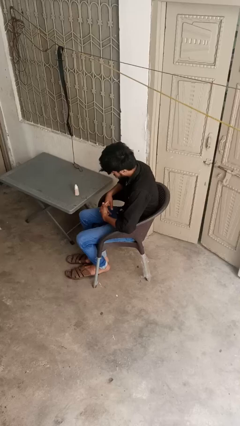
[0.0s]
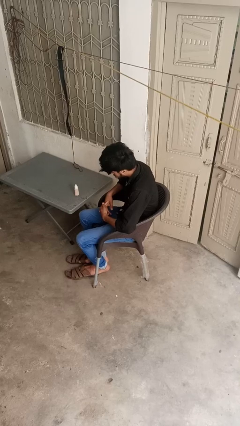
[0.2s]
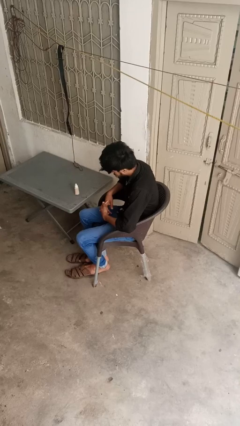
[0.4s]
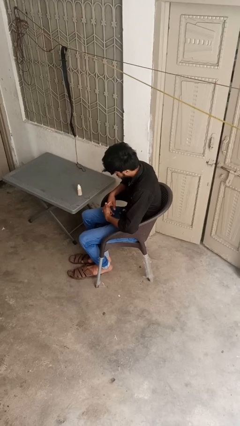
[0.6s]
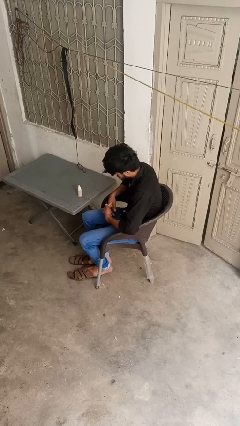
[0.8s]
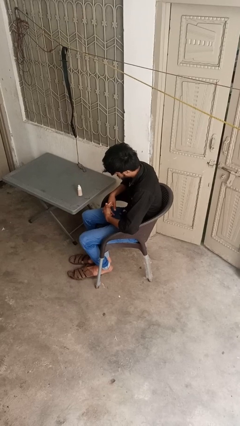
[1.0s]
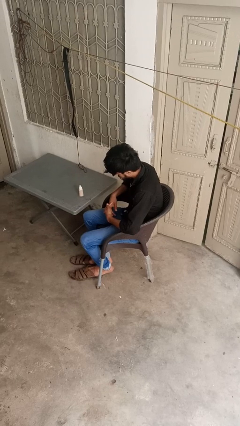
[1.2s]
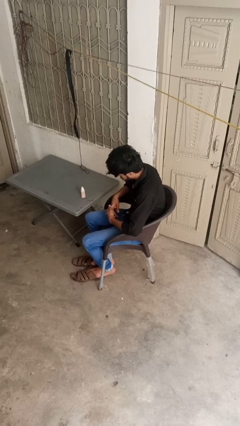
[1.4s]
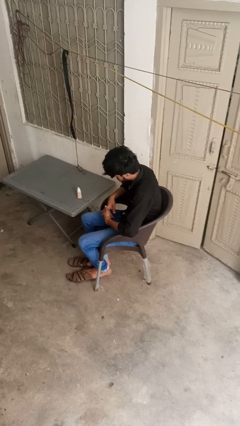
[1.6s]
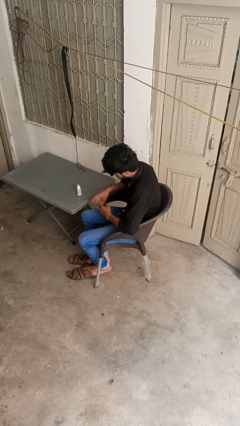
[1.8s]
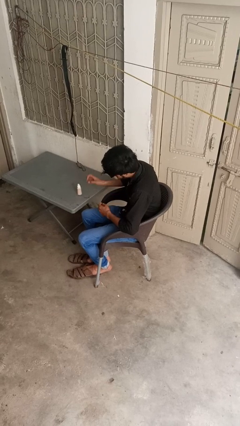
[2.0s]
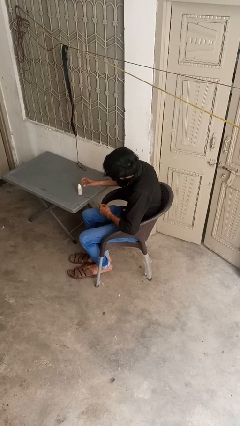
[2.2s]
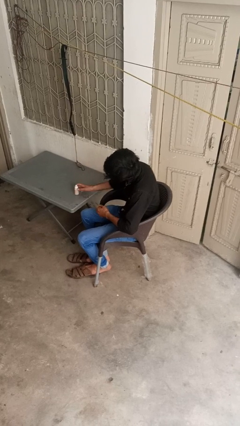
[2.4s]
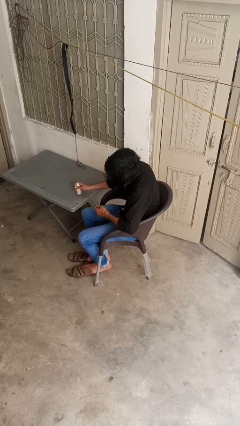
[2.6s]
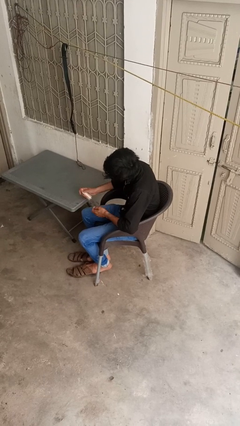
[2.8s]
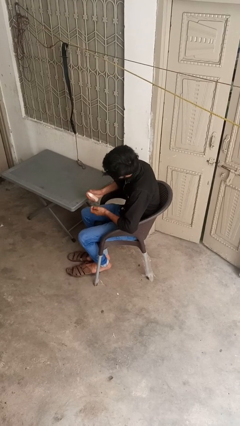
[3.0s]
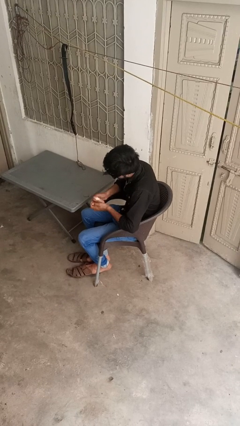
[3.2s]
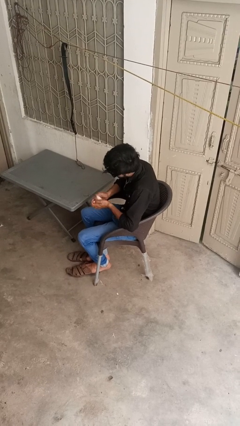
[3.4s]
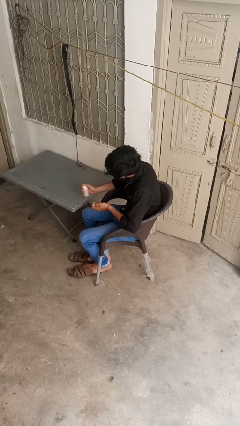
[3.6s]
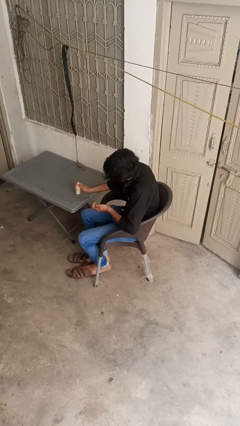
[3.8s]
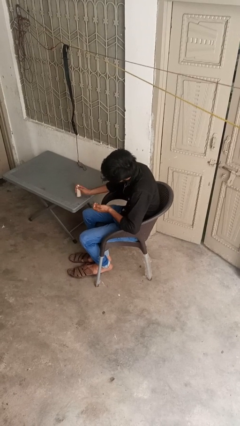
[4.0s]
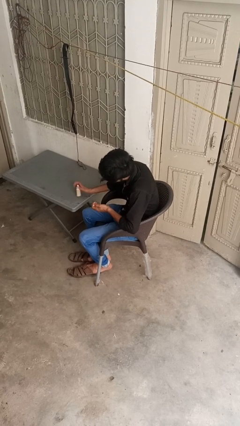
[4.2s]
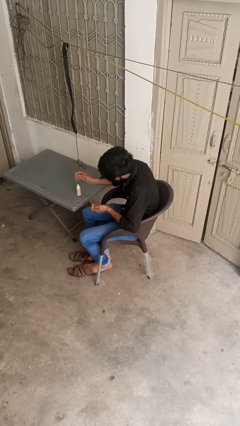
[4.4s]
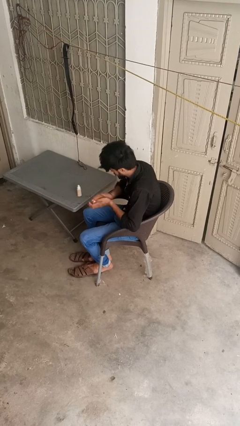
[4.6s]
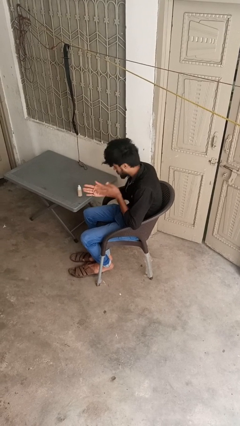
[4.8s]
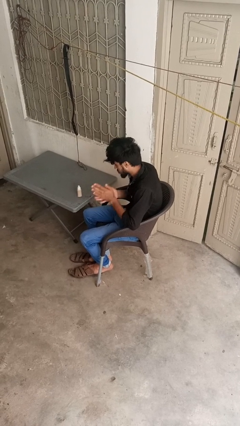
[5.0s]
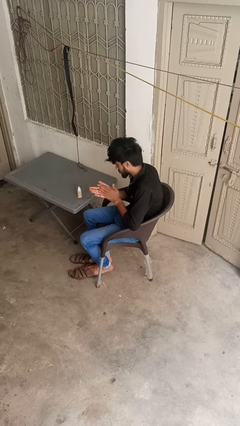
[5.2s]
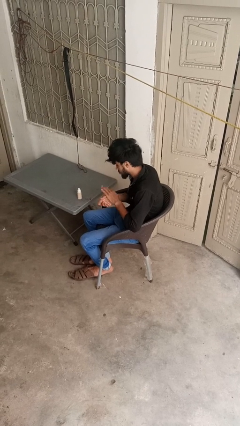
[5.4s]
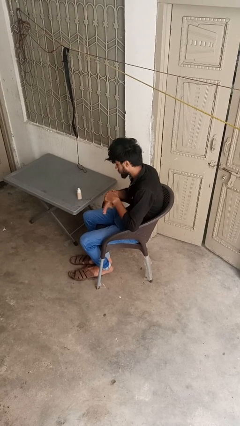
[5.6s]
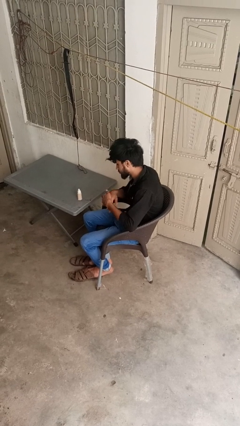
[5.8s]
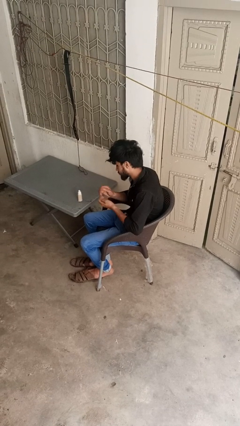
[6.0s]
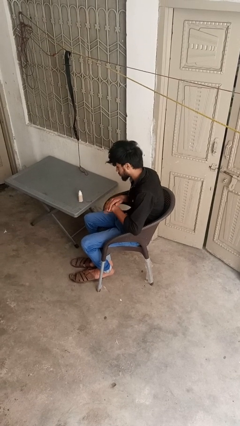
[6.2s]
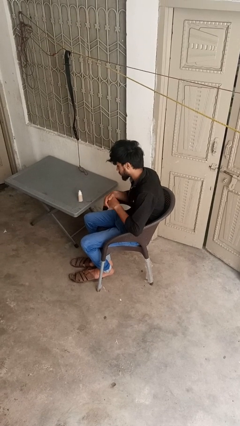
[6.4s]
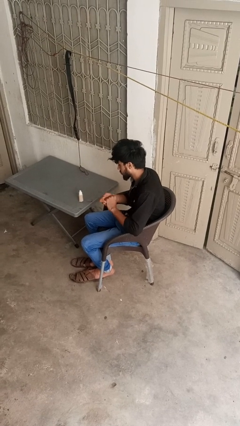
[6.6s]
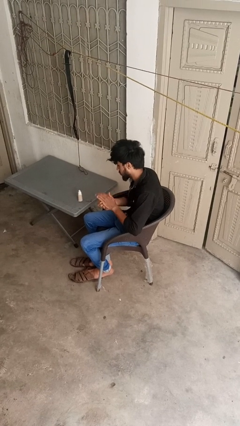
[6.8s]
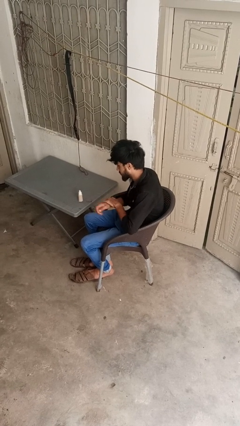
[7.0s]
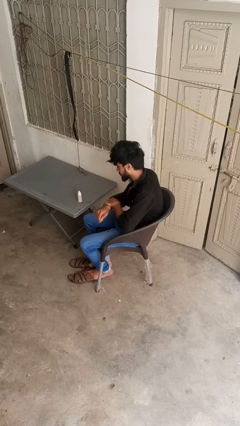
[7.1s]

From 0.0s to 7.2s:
person applies facial moisturizer

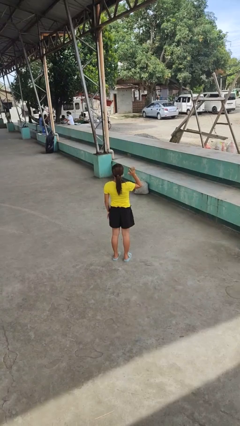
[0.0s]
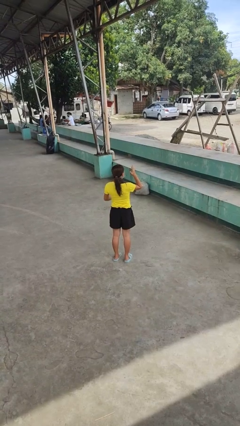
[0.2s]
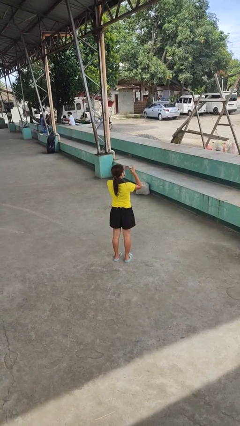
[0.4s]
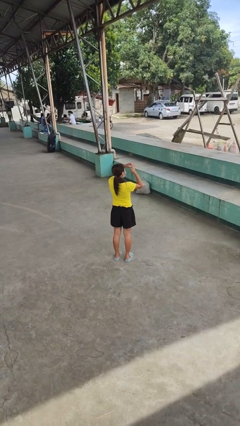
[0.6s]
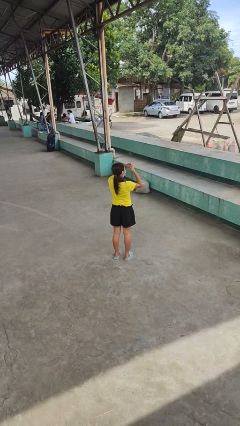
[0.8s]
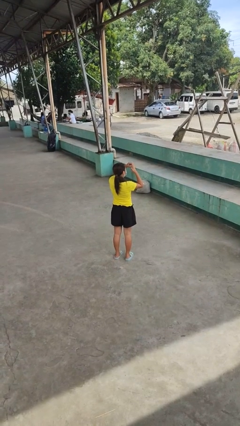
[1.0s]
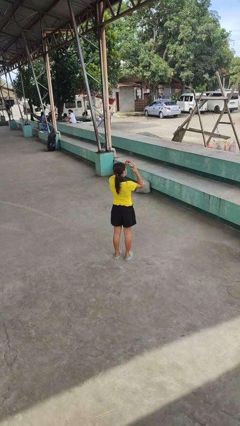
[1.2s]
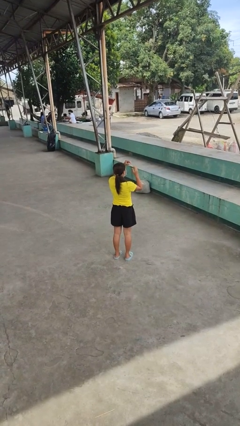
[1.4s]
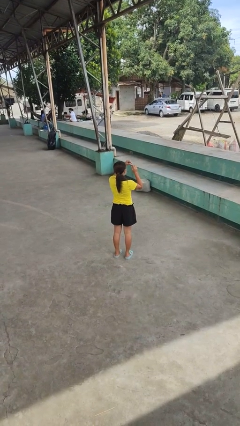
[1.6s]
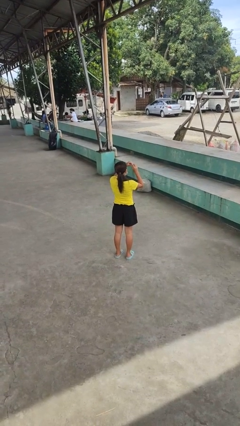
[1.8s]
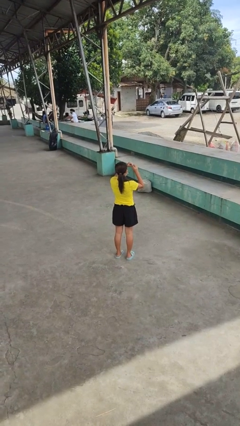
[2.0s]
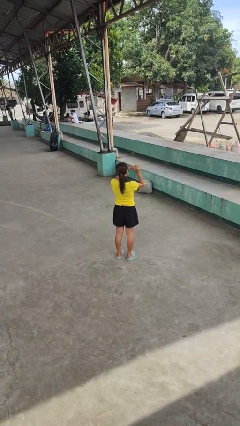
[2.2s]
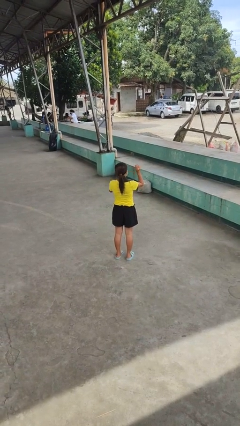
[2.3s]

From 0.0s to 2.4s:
person takes off ring

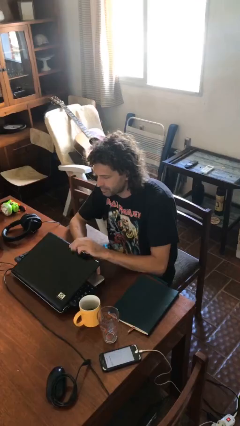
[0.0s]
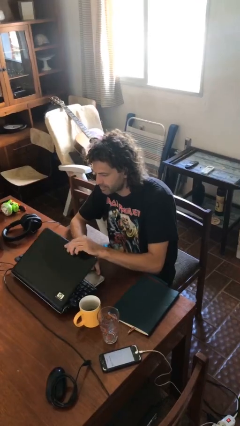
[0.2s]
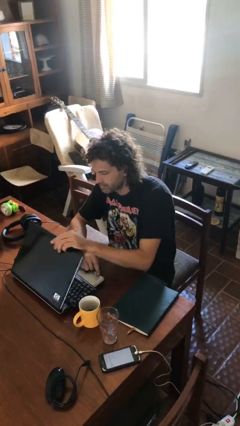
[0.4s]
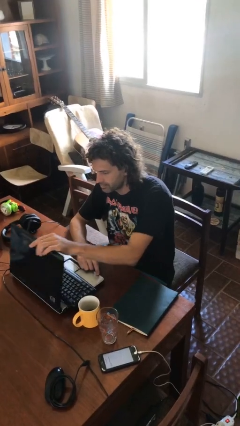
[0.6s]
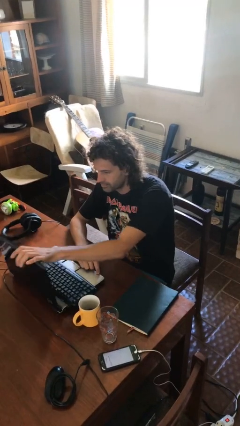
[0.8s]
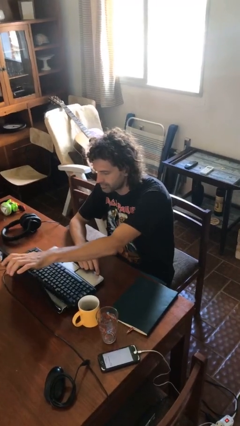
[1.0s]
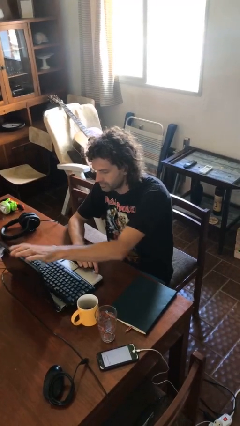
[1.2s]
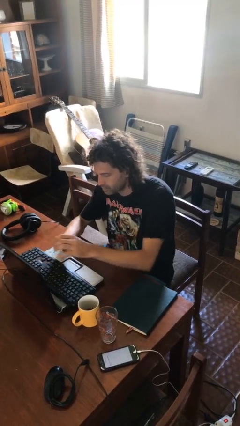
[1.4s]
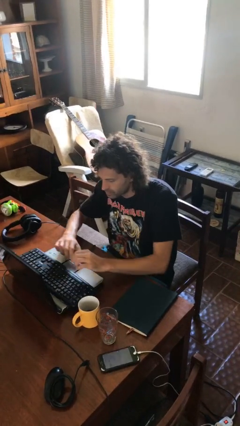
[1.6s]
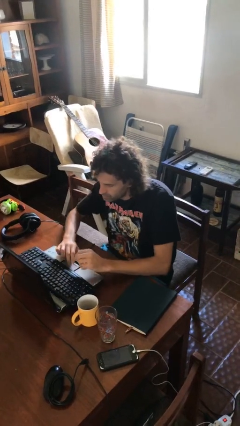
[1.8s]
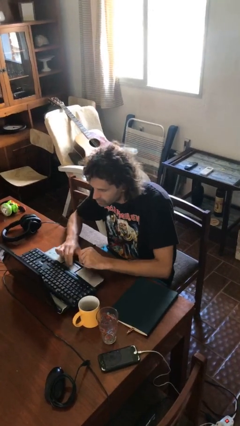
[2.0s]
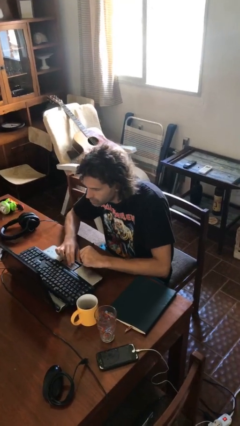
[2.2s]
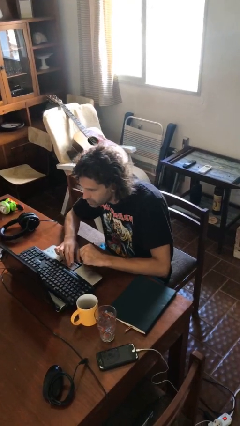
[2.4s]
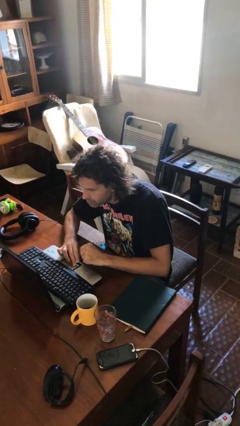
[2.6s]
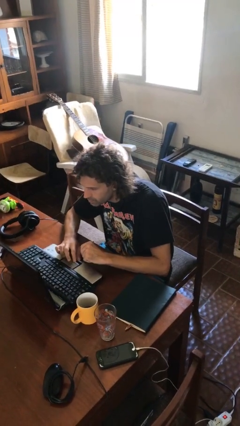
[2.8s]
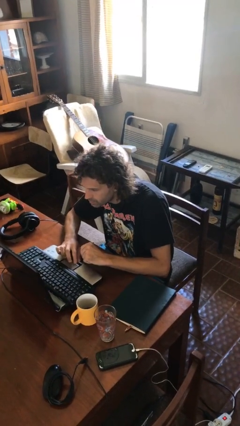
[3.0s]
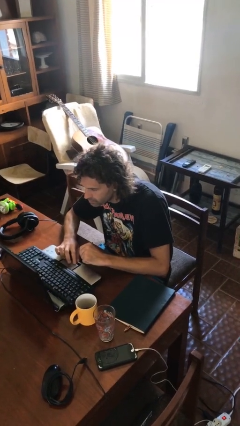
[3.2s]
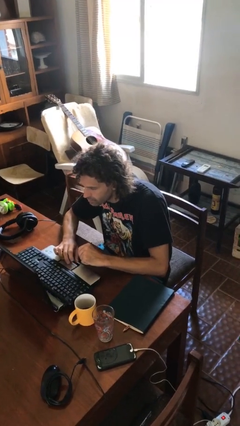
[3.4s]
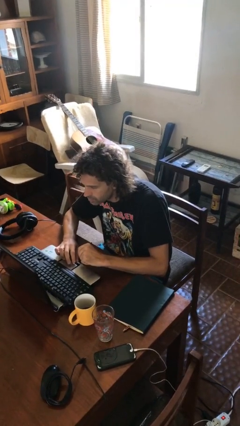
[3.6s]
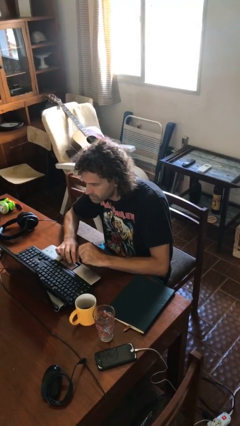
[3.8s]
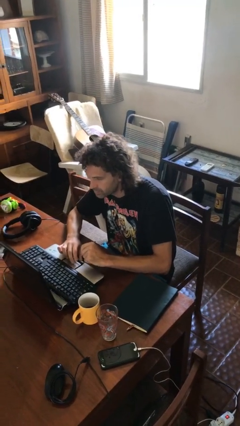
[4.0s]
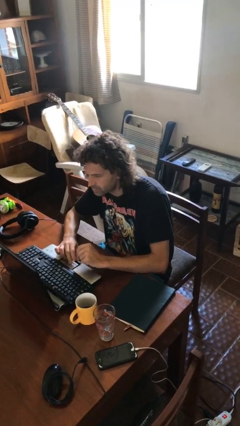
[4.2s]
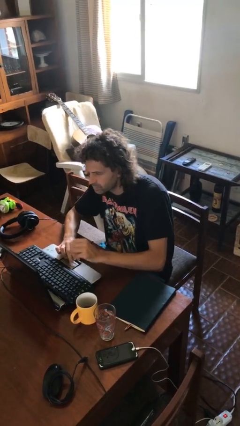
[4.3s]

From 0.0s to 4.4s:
person interacts with laptop

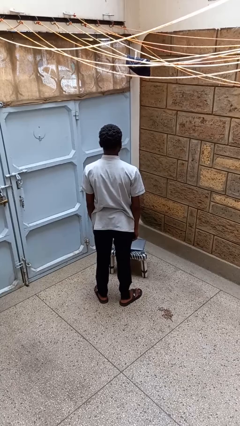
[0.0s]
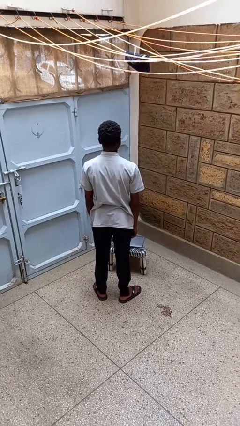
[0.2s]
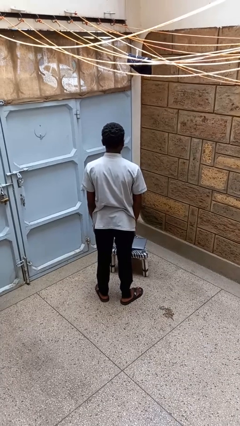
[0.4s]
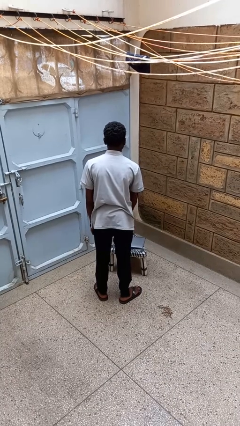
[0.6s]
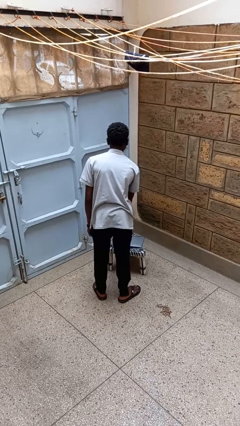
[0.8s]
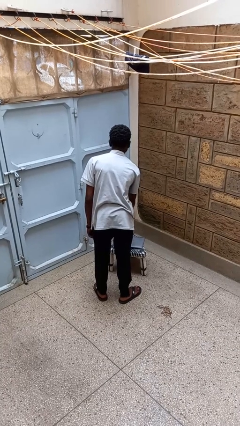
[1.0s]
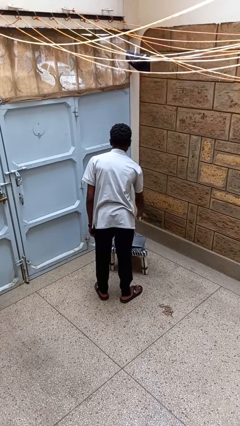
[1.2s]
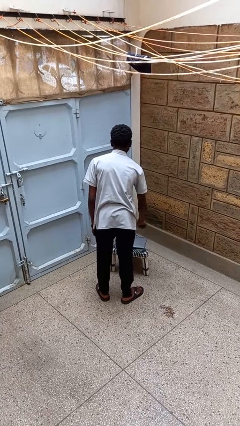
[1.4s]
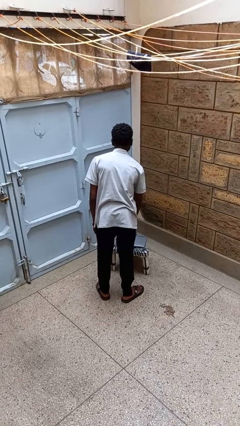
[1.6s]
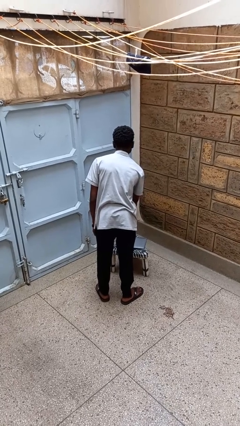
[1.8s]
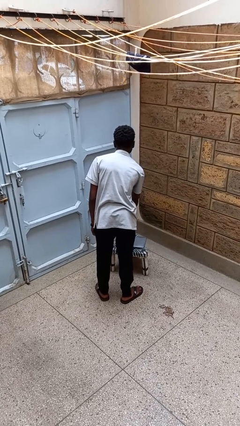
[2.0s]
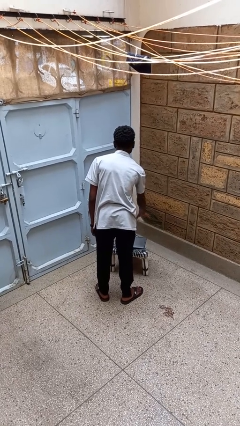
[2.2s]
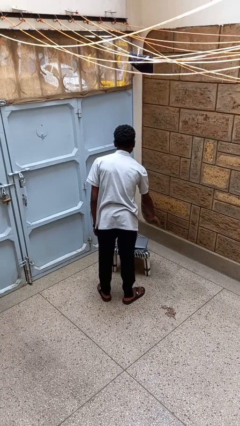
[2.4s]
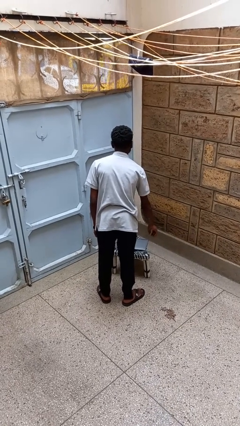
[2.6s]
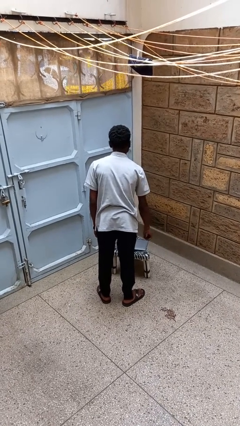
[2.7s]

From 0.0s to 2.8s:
person waves hand over object

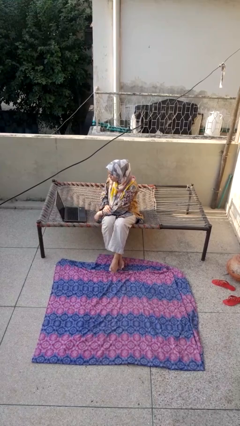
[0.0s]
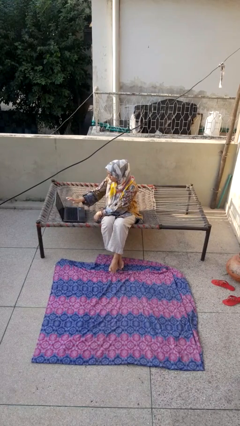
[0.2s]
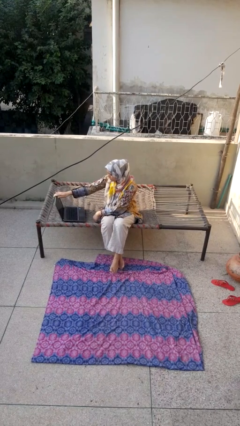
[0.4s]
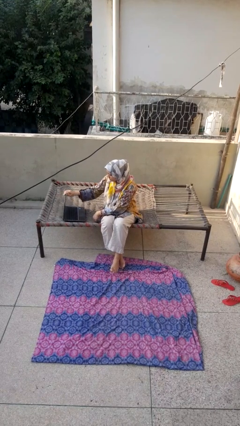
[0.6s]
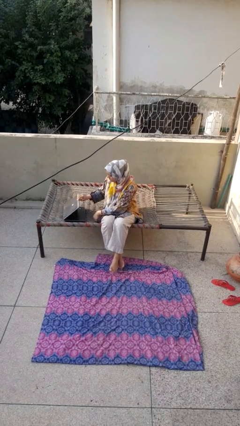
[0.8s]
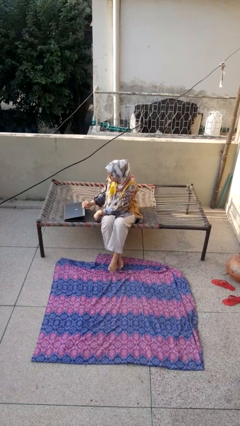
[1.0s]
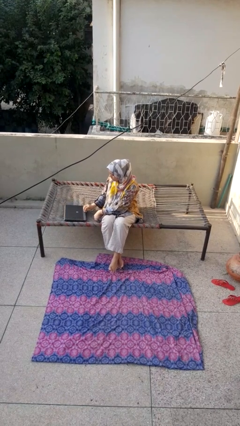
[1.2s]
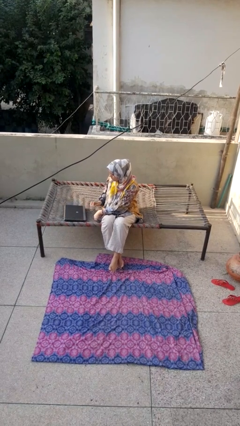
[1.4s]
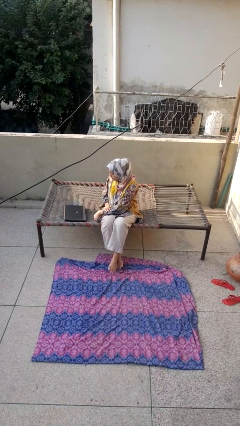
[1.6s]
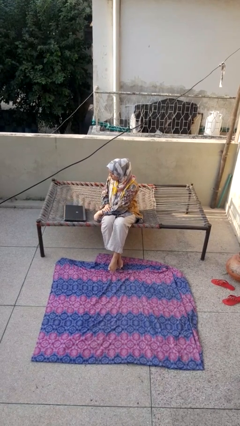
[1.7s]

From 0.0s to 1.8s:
person closes laptop
